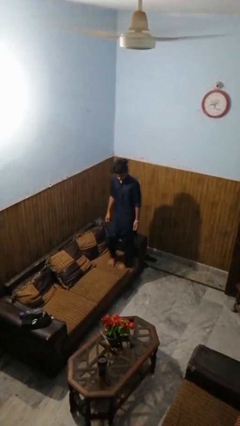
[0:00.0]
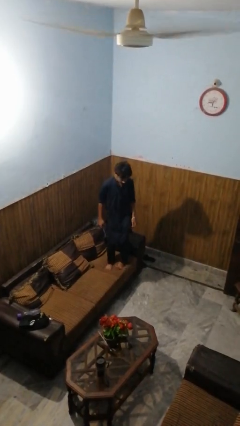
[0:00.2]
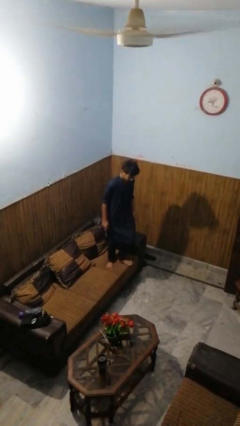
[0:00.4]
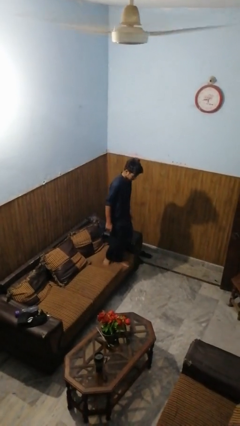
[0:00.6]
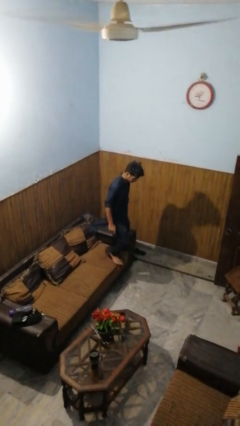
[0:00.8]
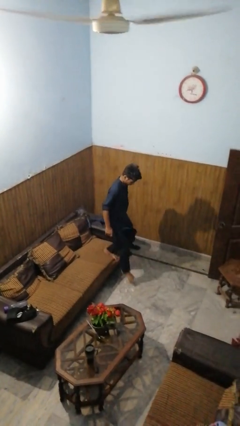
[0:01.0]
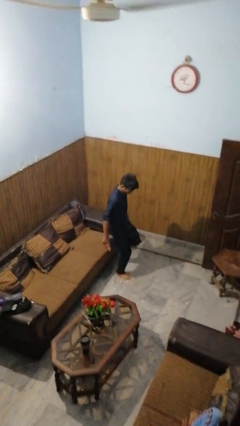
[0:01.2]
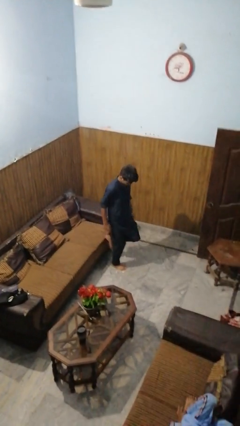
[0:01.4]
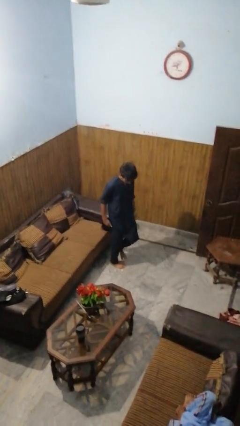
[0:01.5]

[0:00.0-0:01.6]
person climbs off couch

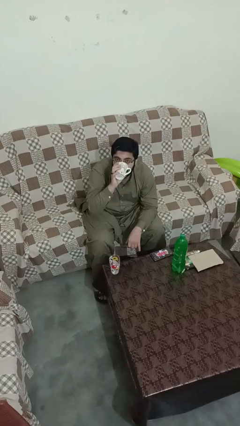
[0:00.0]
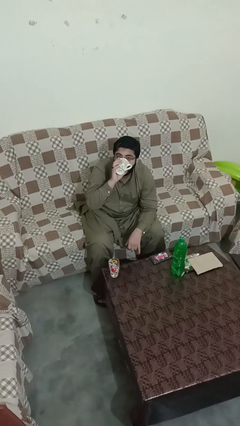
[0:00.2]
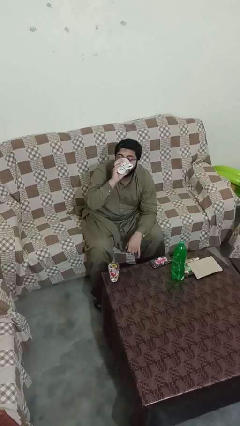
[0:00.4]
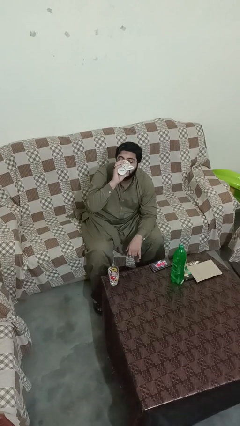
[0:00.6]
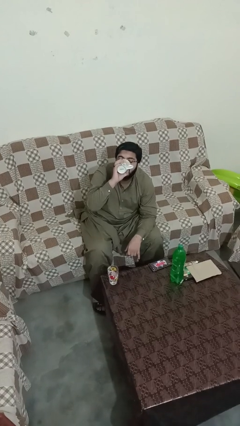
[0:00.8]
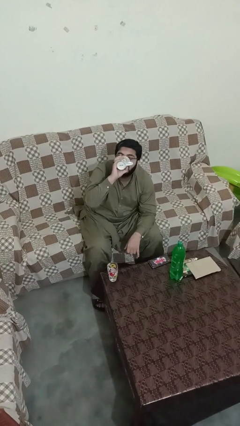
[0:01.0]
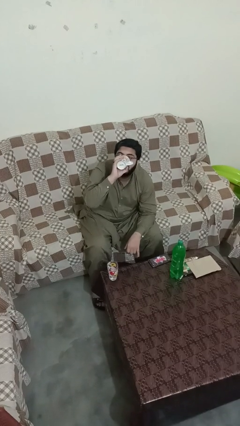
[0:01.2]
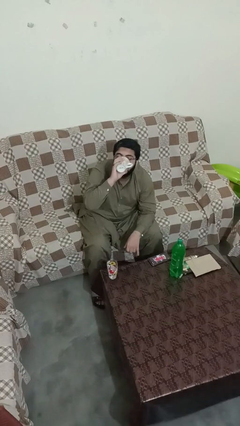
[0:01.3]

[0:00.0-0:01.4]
person drinks from shotglass

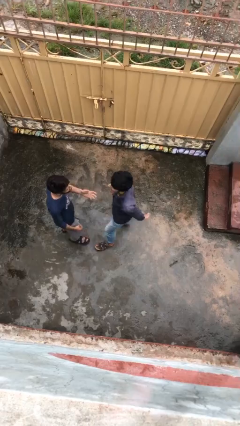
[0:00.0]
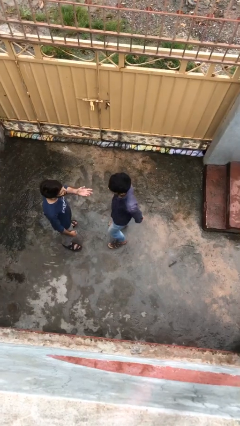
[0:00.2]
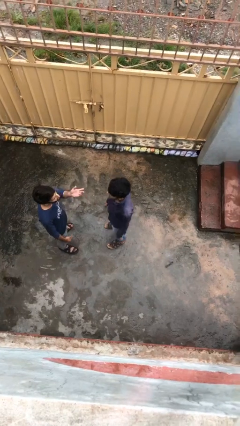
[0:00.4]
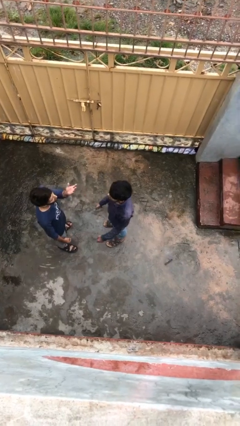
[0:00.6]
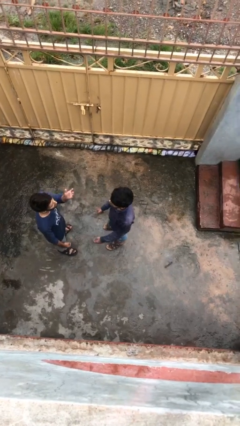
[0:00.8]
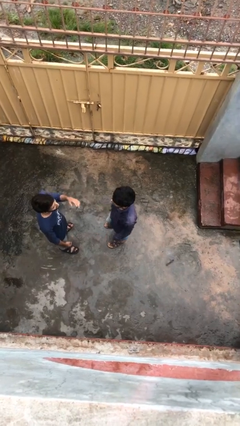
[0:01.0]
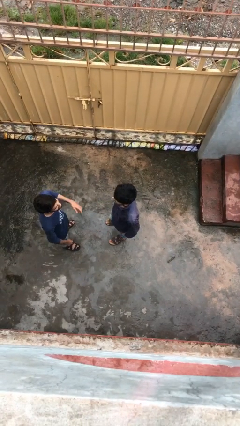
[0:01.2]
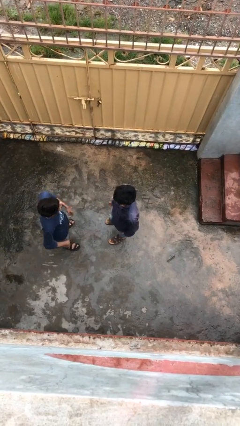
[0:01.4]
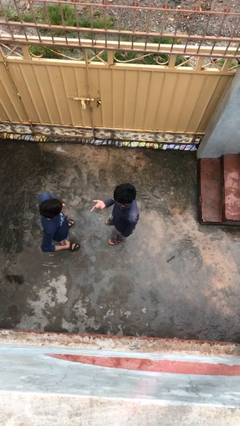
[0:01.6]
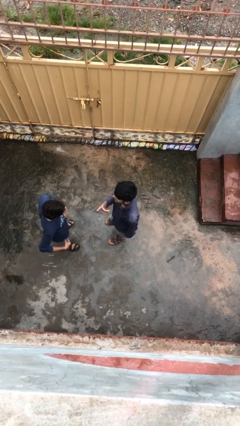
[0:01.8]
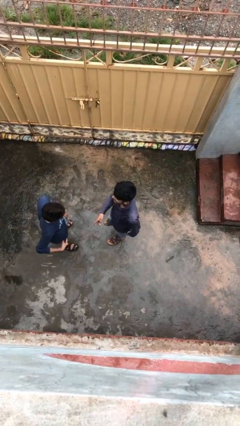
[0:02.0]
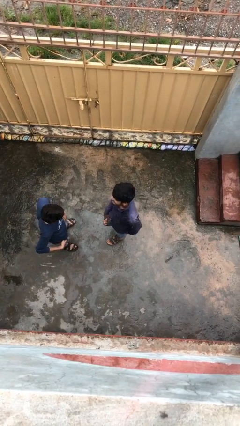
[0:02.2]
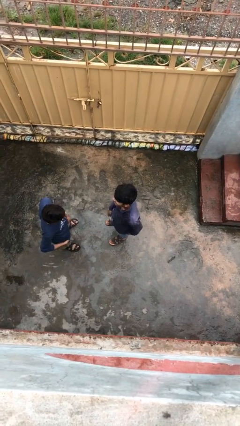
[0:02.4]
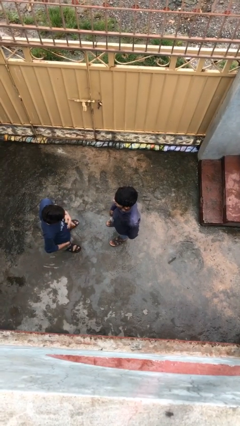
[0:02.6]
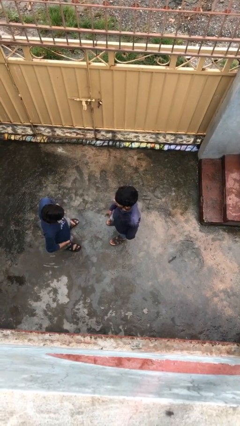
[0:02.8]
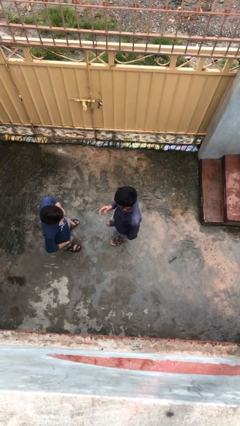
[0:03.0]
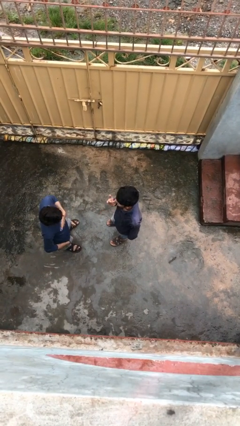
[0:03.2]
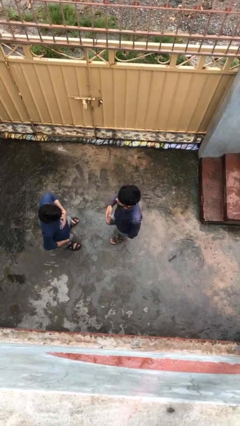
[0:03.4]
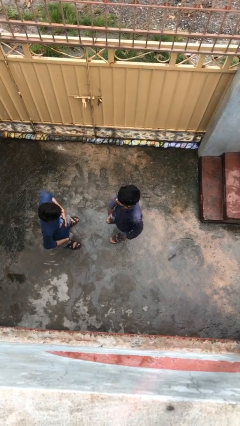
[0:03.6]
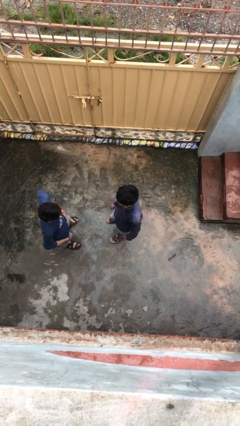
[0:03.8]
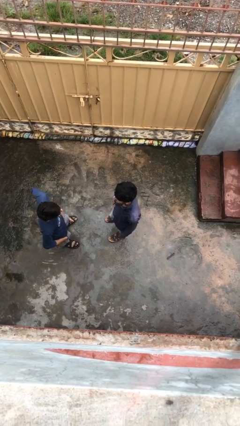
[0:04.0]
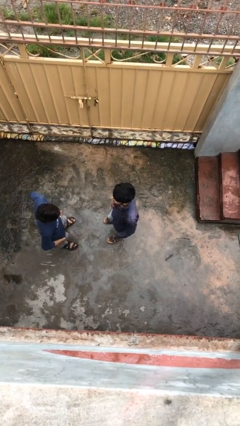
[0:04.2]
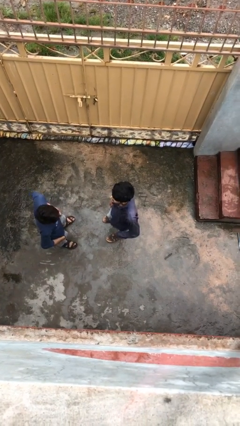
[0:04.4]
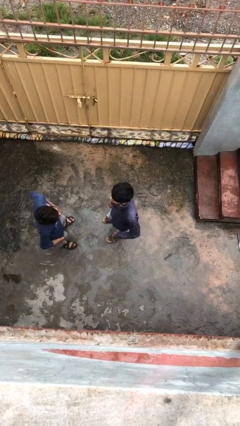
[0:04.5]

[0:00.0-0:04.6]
person talks to person

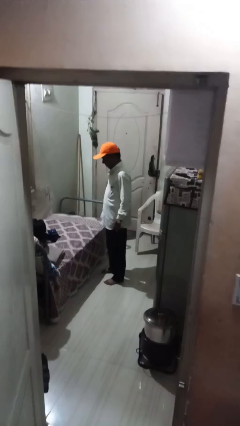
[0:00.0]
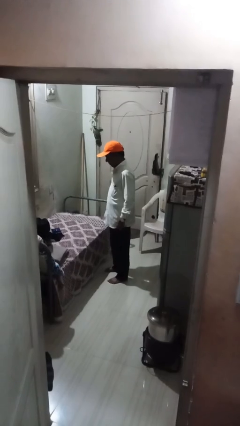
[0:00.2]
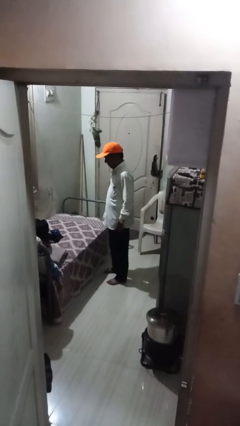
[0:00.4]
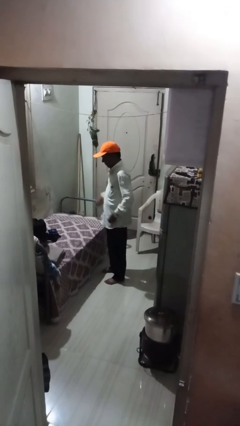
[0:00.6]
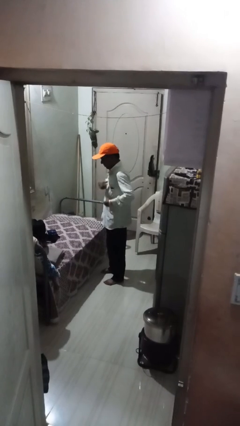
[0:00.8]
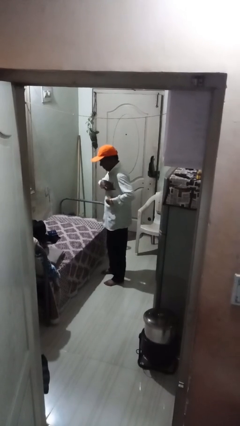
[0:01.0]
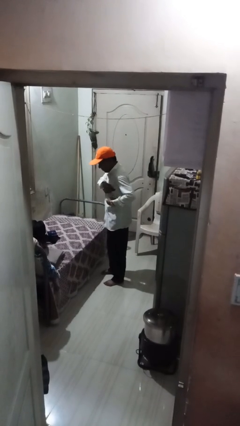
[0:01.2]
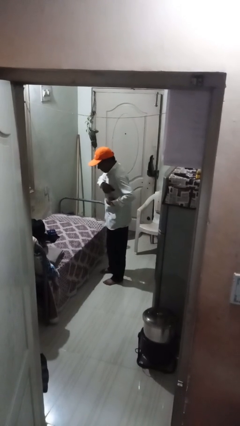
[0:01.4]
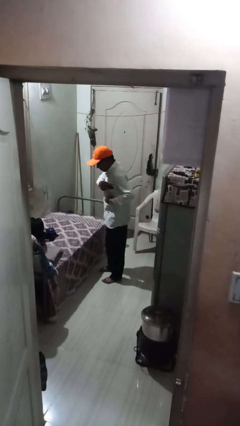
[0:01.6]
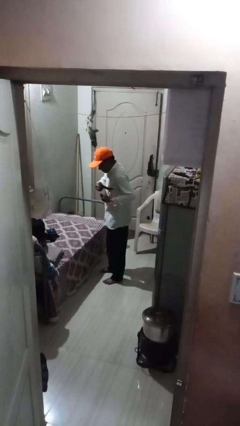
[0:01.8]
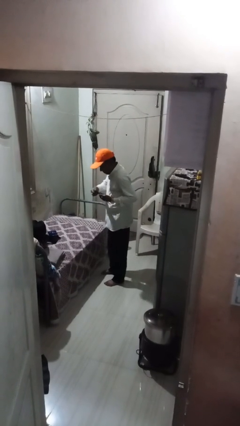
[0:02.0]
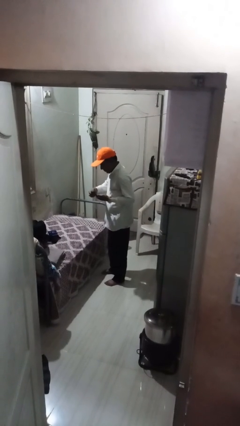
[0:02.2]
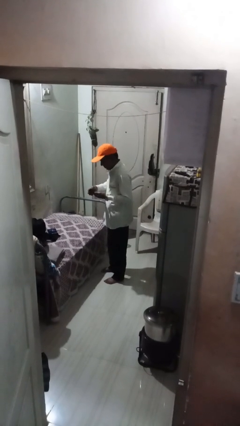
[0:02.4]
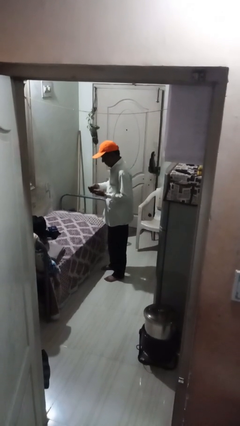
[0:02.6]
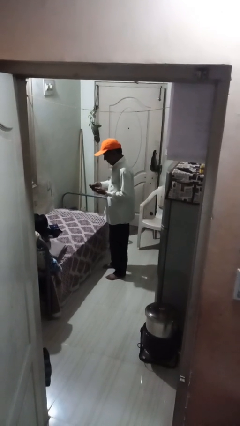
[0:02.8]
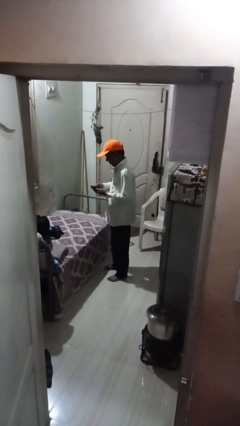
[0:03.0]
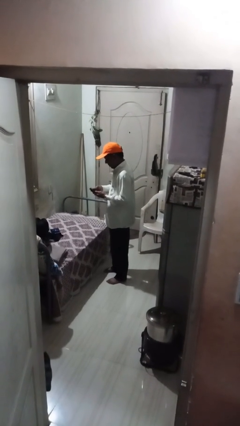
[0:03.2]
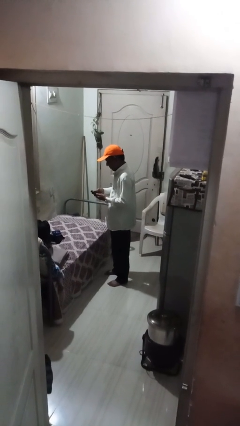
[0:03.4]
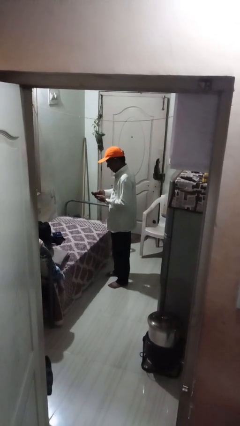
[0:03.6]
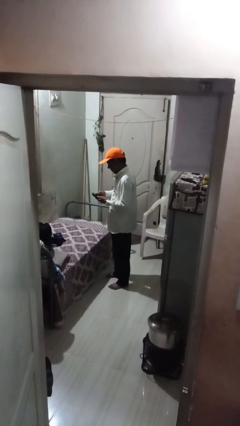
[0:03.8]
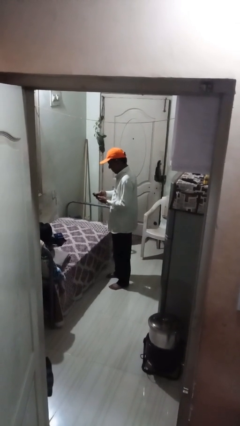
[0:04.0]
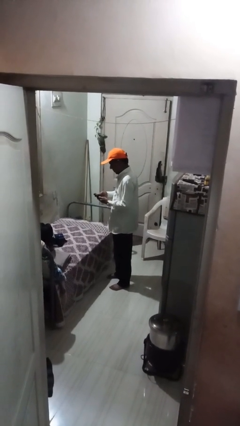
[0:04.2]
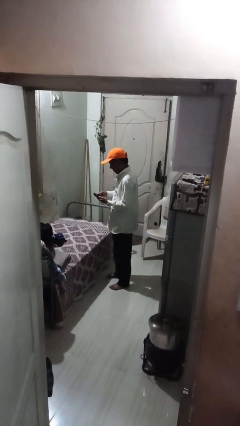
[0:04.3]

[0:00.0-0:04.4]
person takes phone from pocket

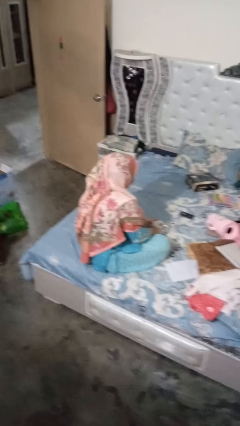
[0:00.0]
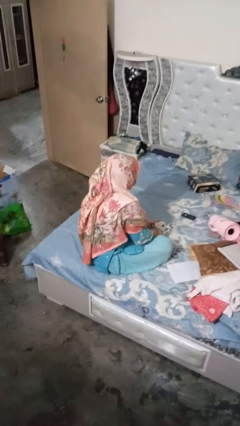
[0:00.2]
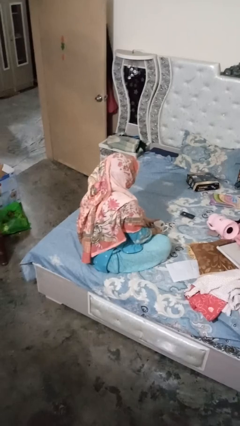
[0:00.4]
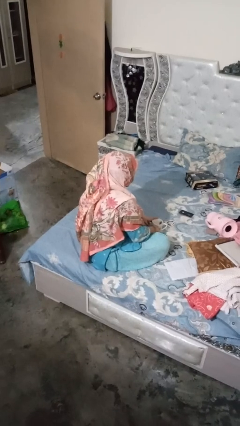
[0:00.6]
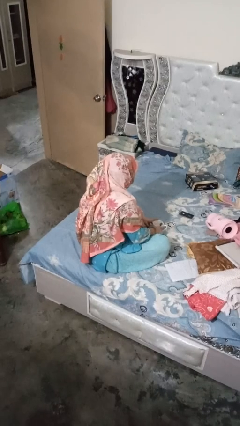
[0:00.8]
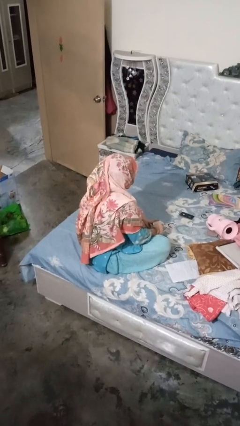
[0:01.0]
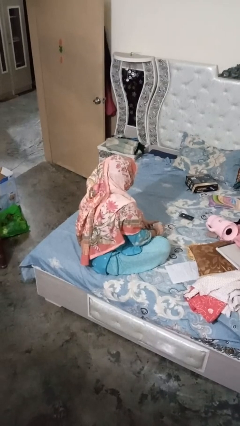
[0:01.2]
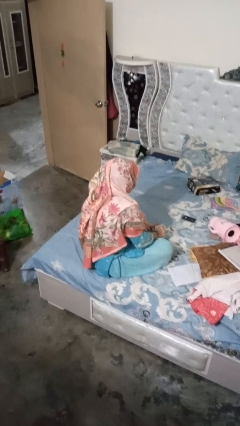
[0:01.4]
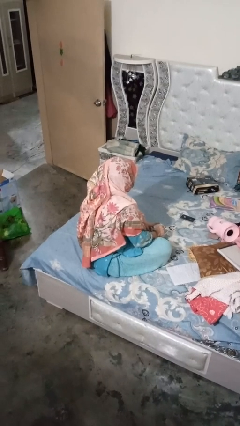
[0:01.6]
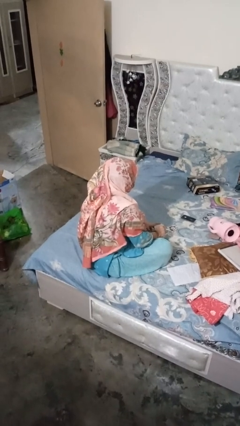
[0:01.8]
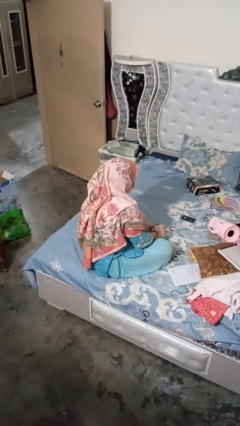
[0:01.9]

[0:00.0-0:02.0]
person stirs mug

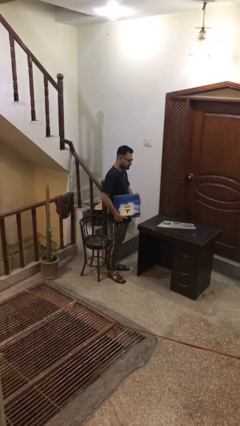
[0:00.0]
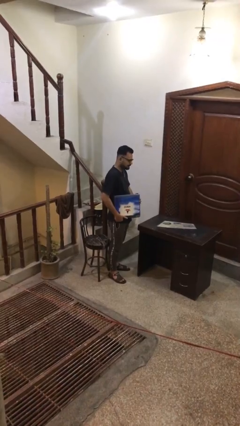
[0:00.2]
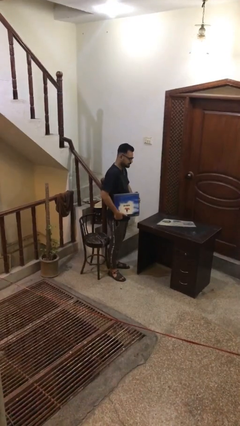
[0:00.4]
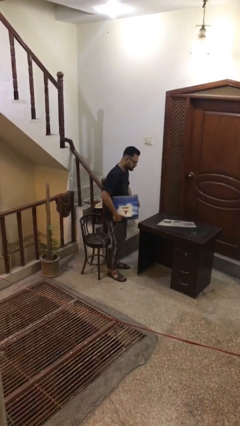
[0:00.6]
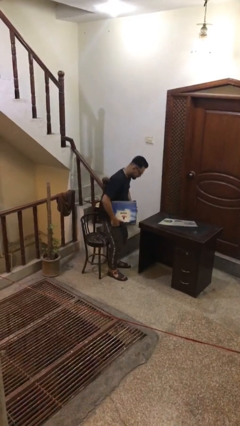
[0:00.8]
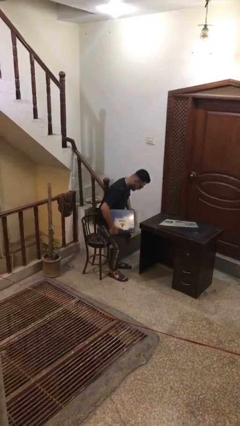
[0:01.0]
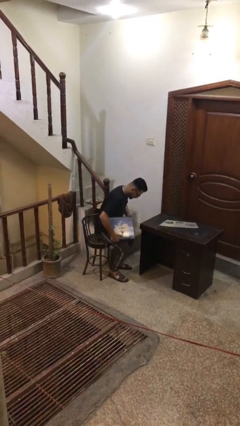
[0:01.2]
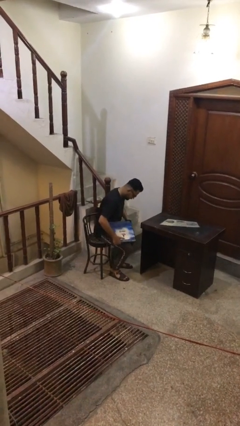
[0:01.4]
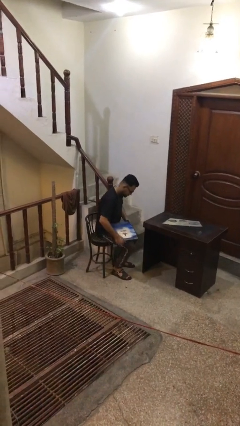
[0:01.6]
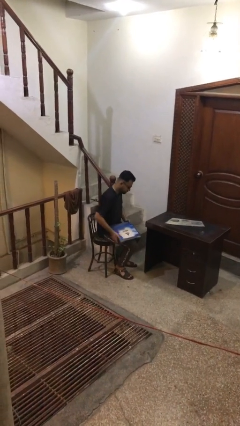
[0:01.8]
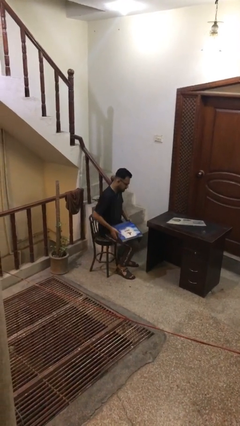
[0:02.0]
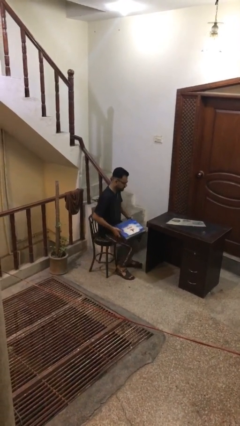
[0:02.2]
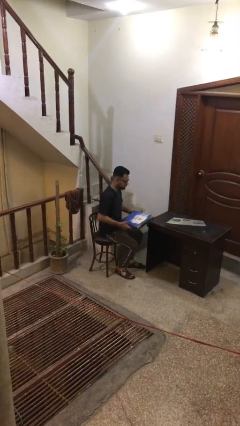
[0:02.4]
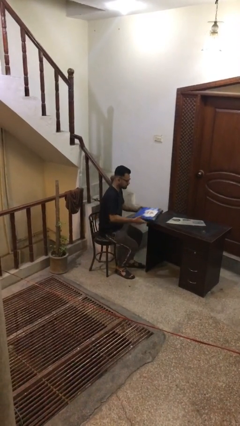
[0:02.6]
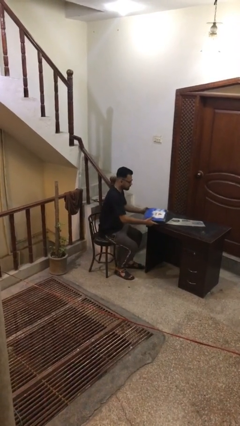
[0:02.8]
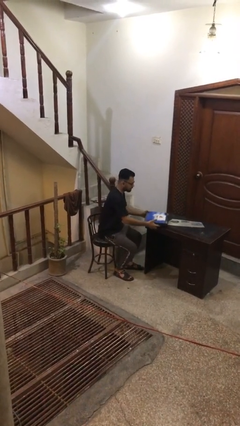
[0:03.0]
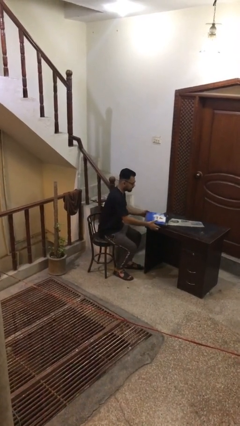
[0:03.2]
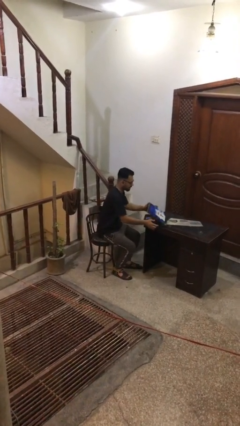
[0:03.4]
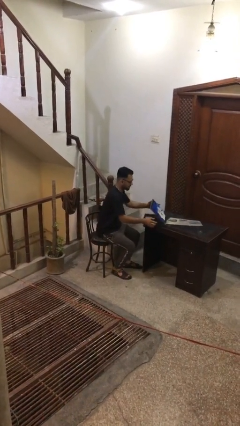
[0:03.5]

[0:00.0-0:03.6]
person sits down
